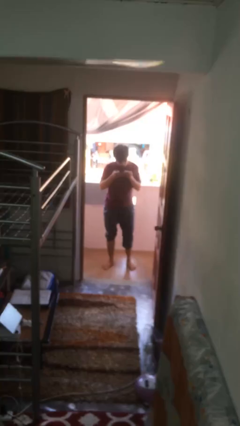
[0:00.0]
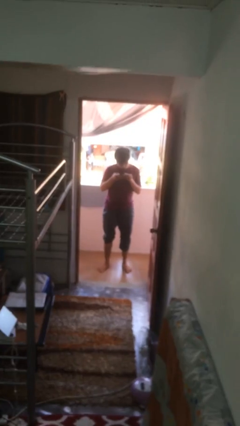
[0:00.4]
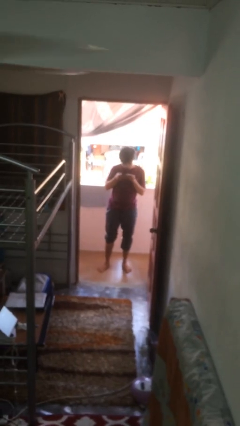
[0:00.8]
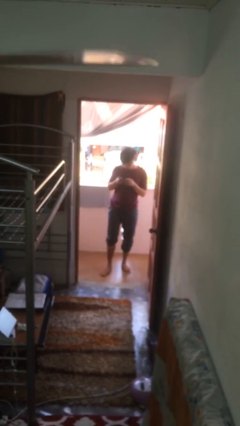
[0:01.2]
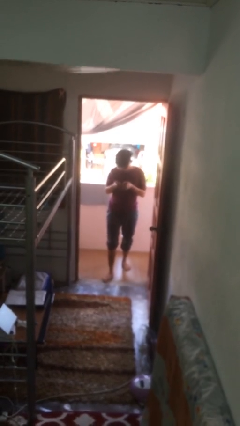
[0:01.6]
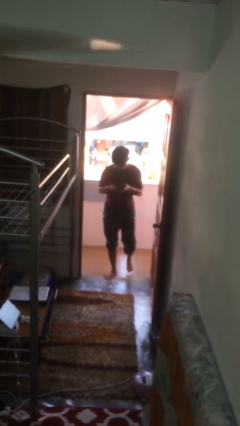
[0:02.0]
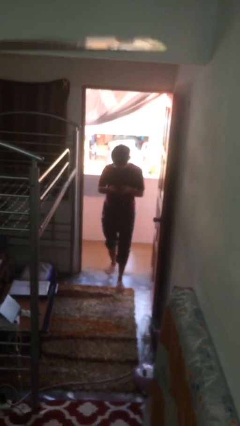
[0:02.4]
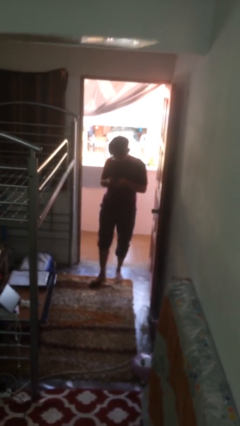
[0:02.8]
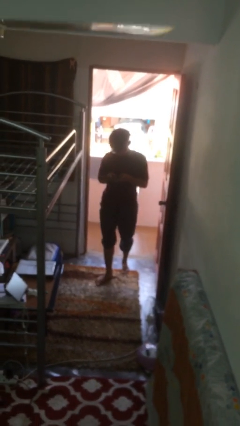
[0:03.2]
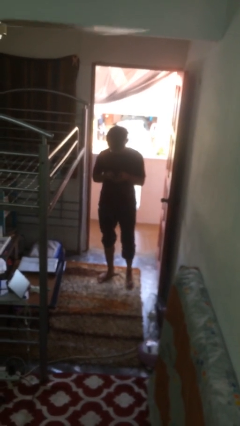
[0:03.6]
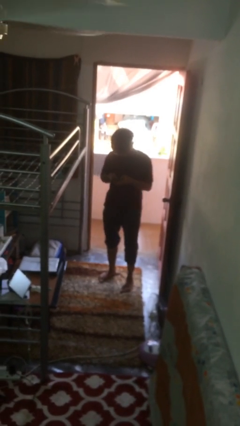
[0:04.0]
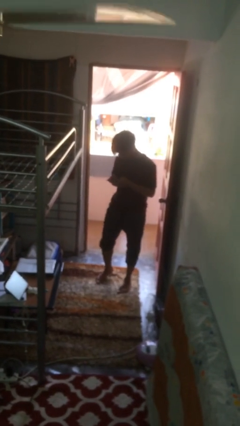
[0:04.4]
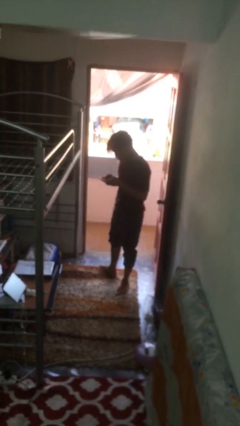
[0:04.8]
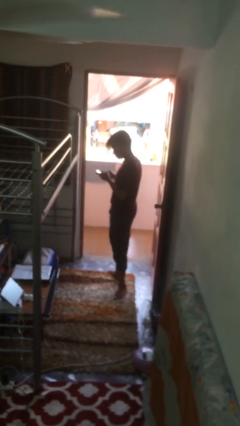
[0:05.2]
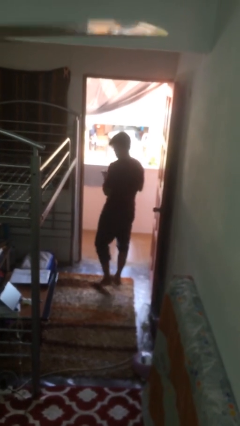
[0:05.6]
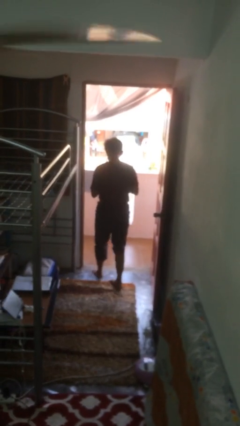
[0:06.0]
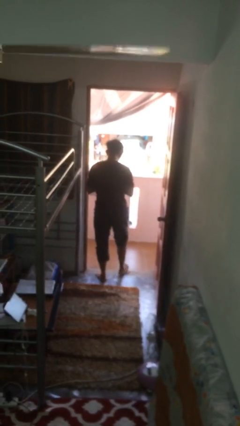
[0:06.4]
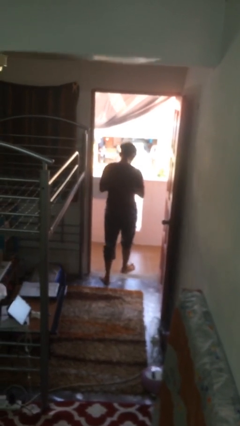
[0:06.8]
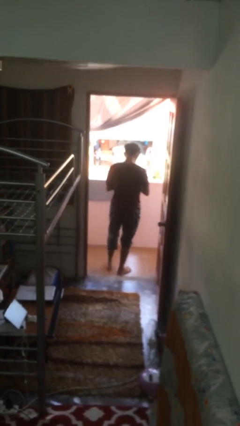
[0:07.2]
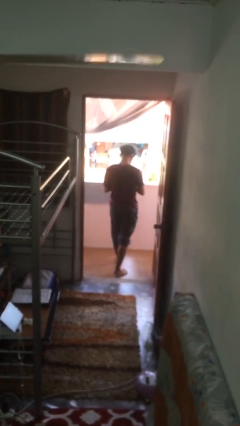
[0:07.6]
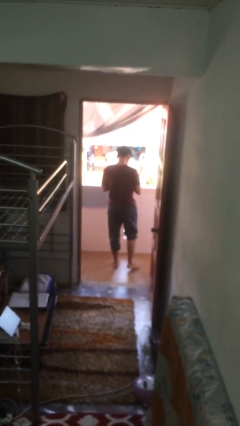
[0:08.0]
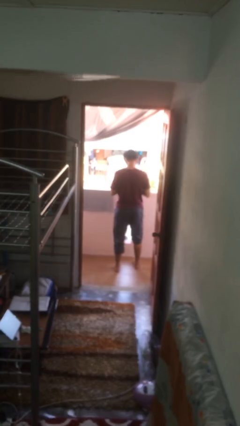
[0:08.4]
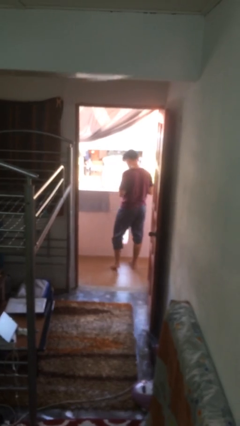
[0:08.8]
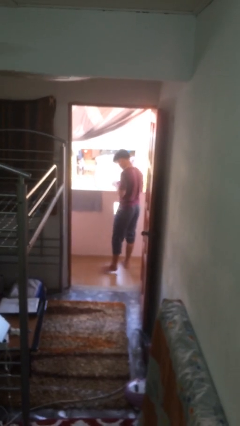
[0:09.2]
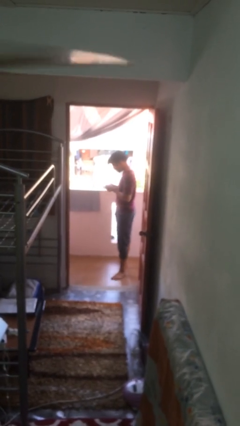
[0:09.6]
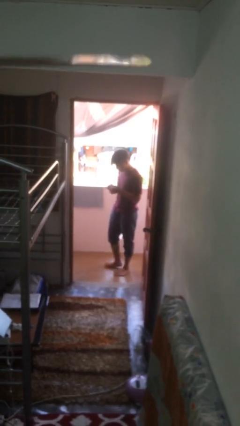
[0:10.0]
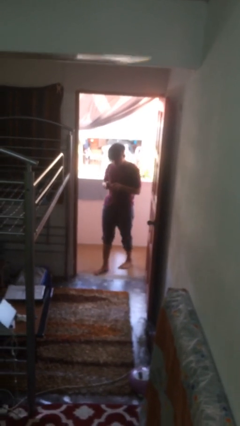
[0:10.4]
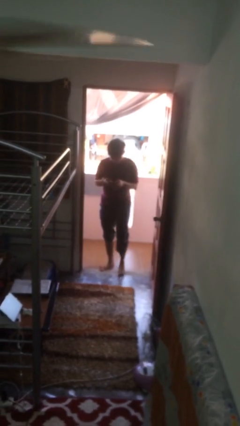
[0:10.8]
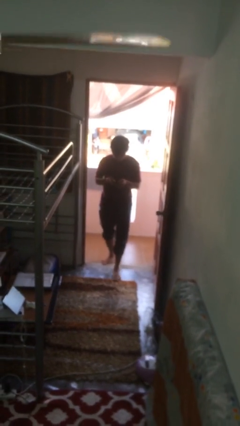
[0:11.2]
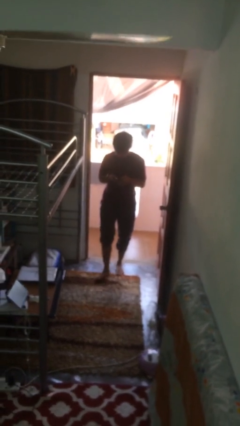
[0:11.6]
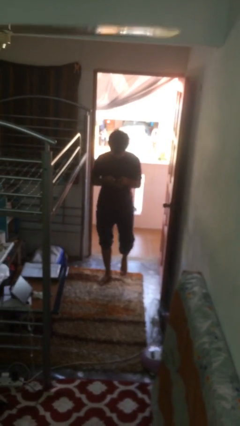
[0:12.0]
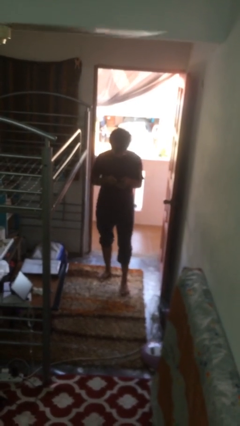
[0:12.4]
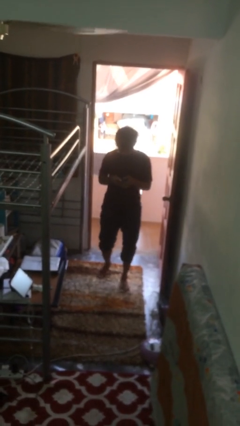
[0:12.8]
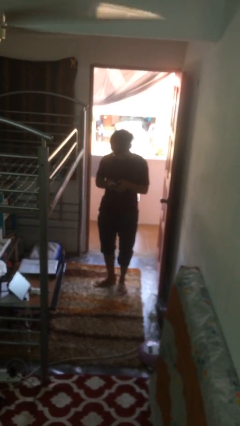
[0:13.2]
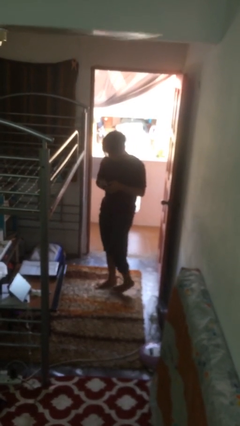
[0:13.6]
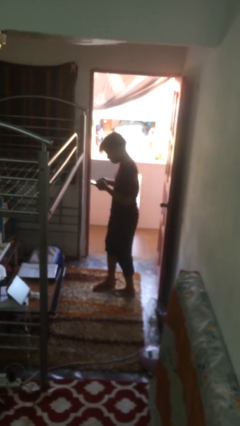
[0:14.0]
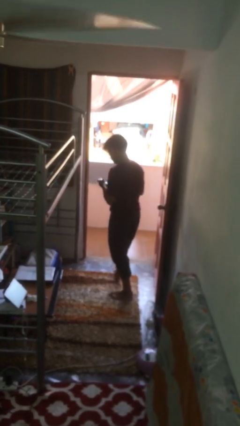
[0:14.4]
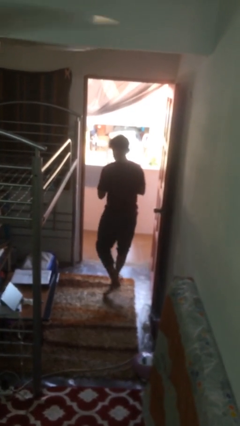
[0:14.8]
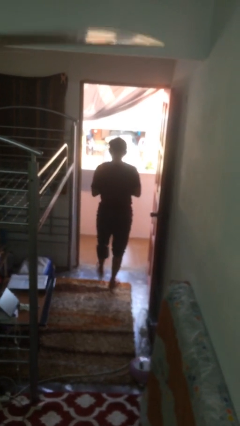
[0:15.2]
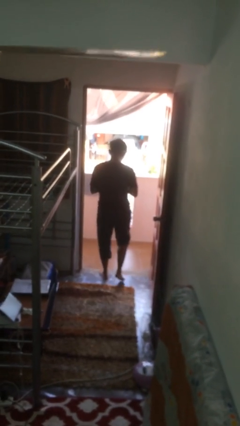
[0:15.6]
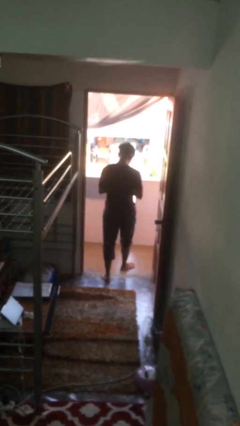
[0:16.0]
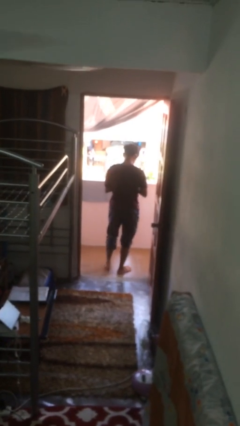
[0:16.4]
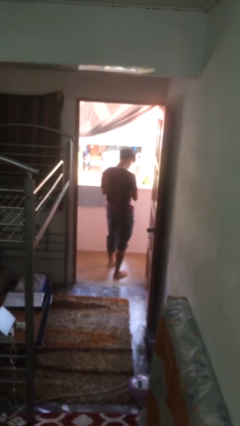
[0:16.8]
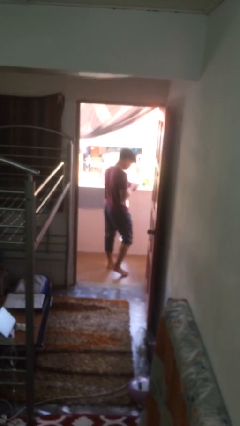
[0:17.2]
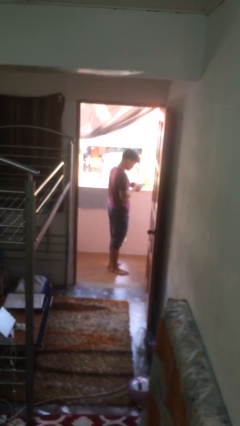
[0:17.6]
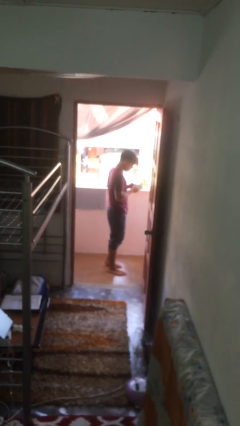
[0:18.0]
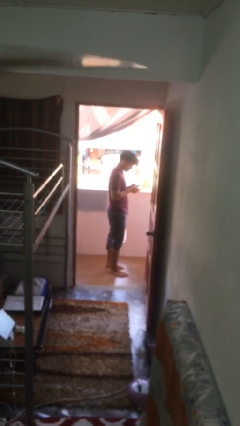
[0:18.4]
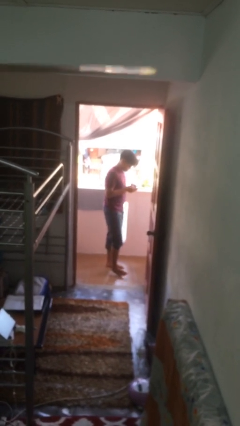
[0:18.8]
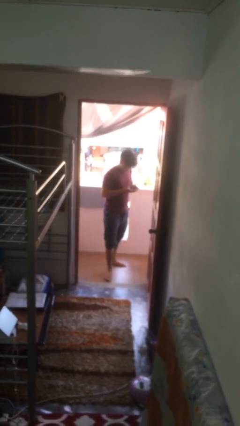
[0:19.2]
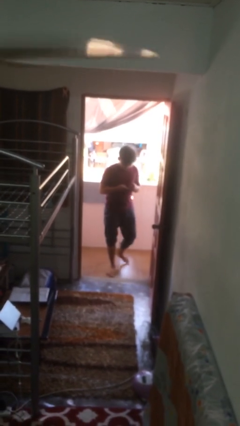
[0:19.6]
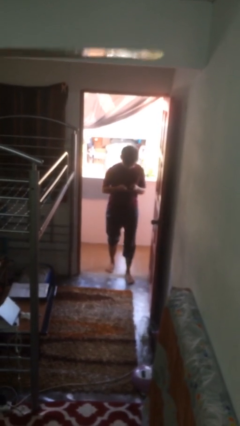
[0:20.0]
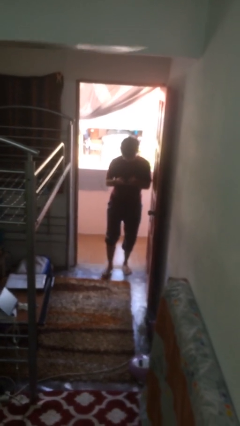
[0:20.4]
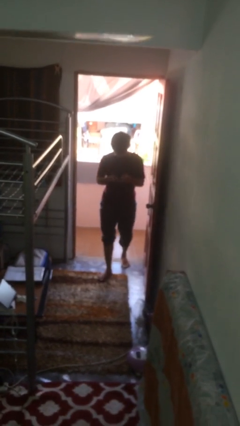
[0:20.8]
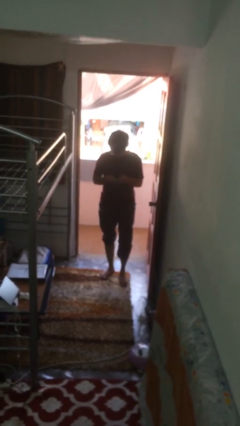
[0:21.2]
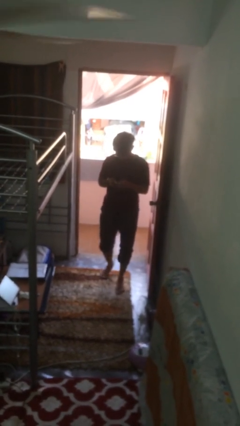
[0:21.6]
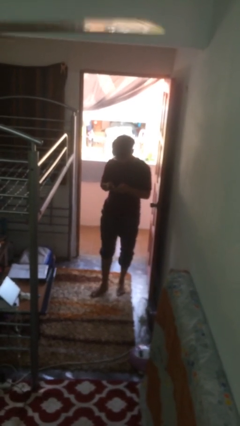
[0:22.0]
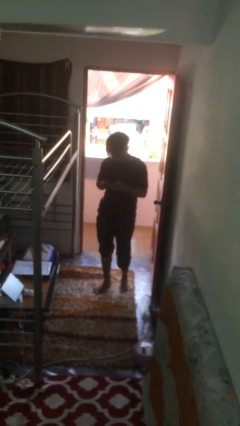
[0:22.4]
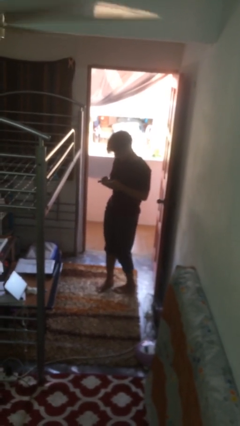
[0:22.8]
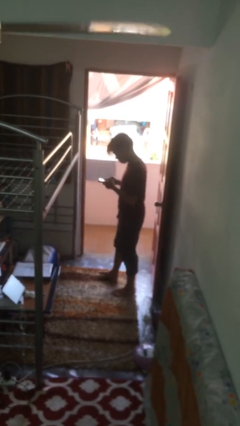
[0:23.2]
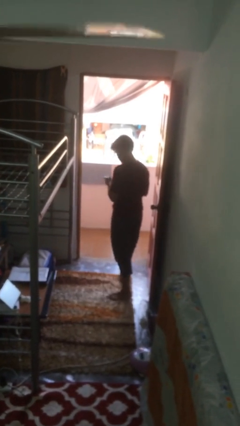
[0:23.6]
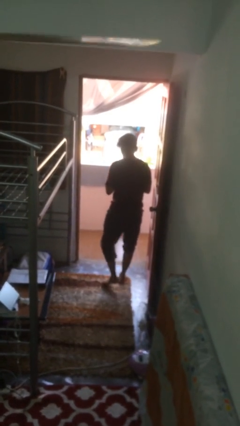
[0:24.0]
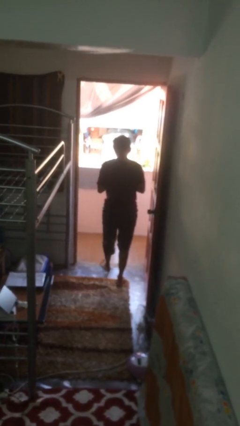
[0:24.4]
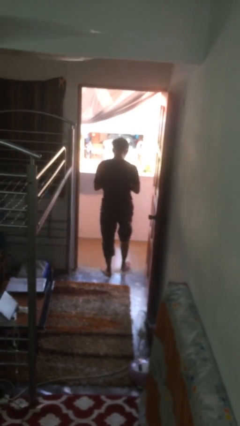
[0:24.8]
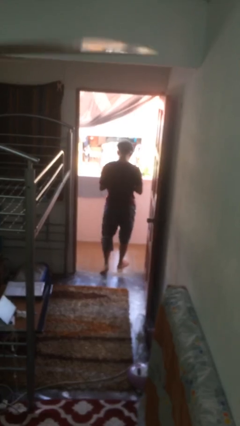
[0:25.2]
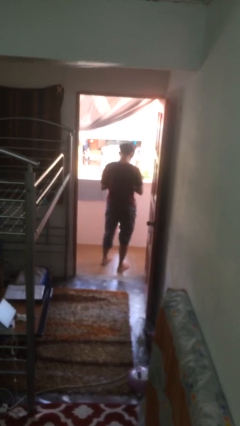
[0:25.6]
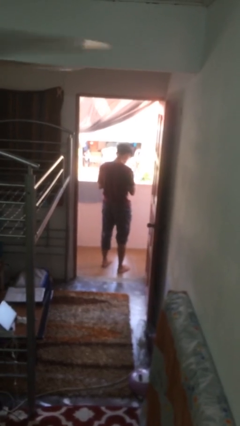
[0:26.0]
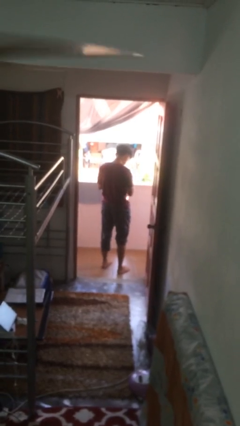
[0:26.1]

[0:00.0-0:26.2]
person texts on phone

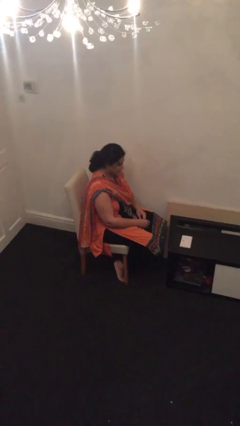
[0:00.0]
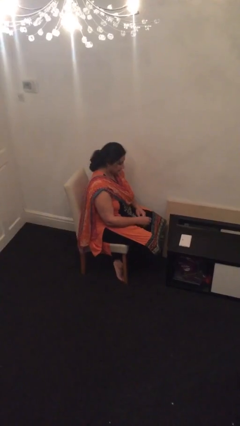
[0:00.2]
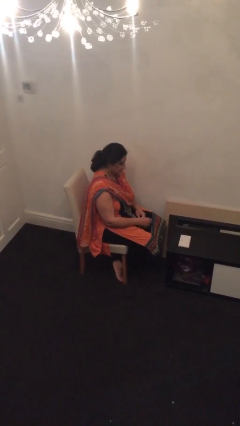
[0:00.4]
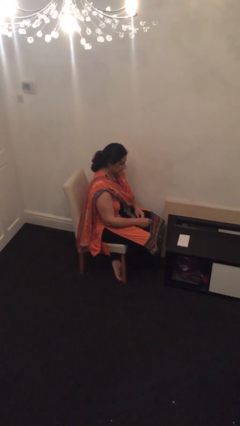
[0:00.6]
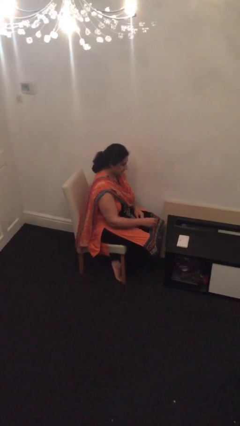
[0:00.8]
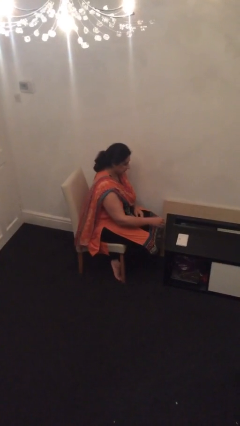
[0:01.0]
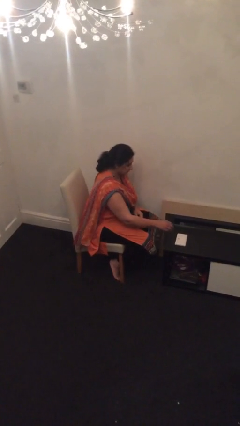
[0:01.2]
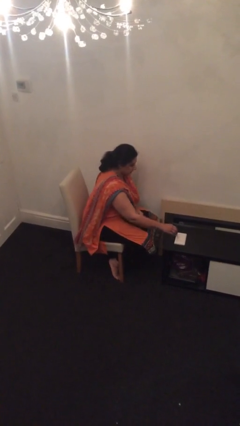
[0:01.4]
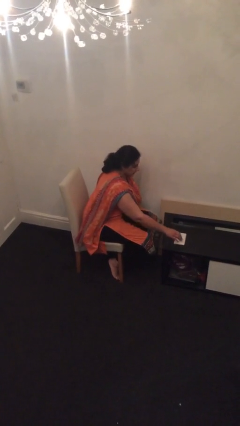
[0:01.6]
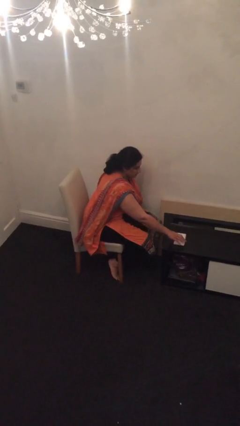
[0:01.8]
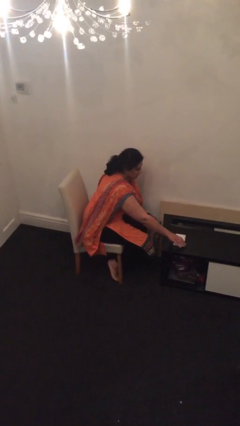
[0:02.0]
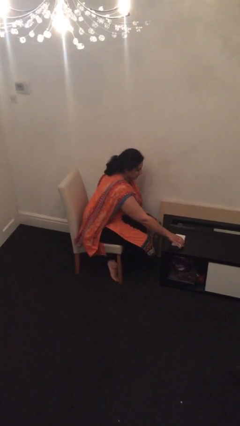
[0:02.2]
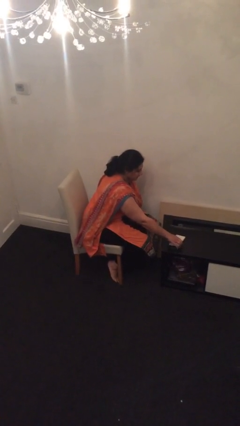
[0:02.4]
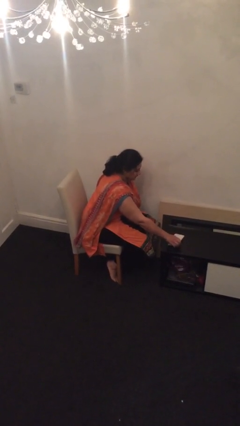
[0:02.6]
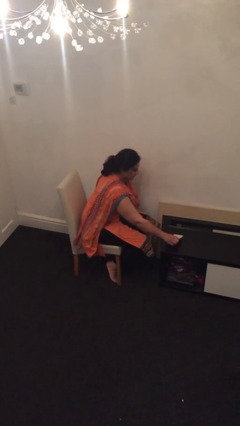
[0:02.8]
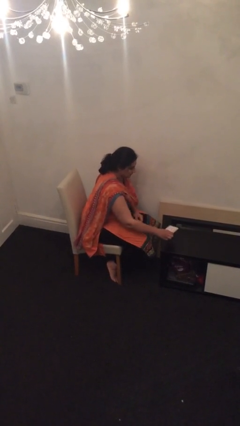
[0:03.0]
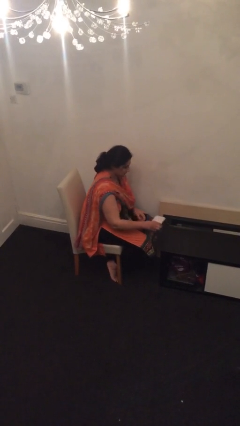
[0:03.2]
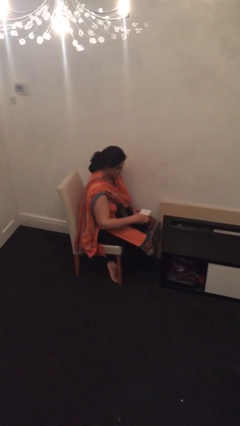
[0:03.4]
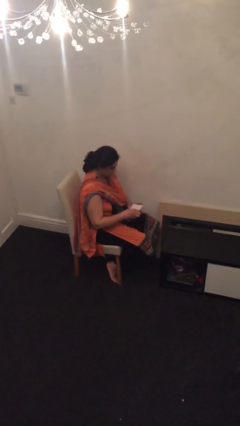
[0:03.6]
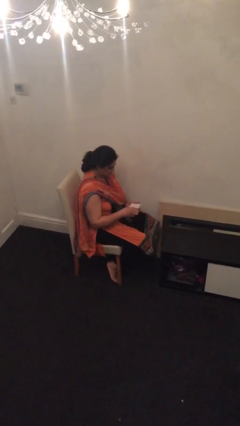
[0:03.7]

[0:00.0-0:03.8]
person picks up object from table

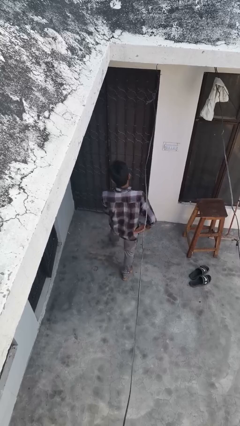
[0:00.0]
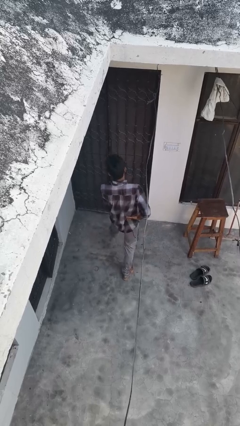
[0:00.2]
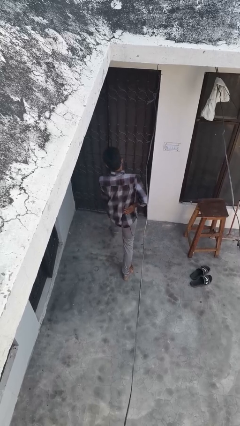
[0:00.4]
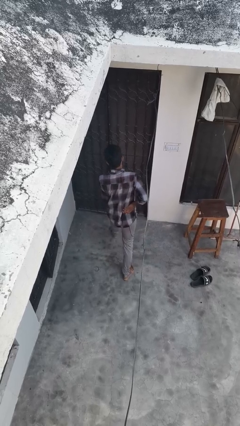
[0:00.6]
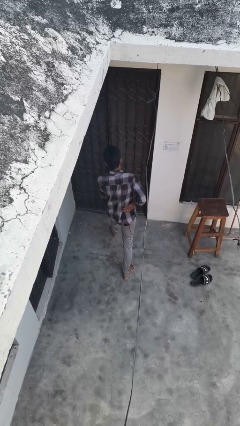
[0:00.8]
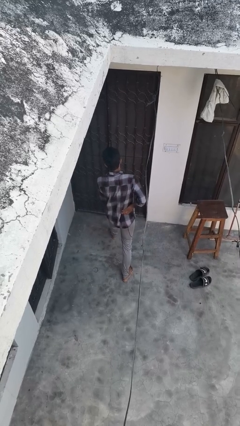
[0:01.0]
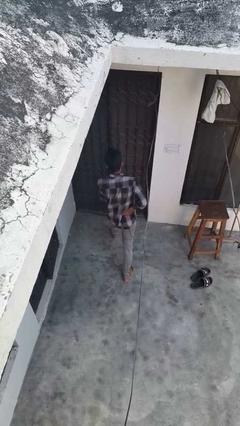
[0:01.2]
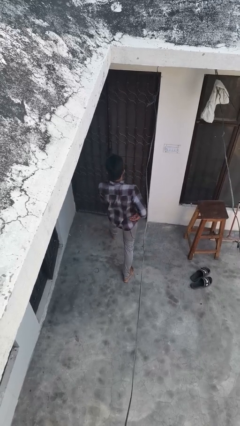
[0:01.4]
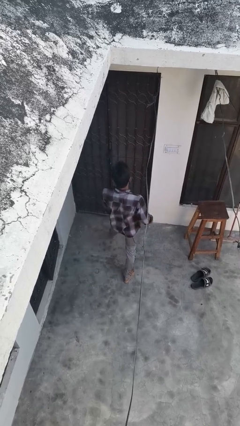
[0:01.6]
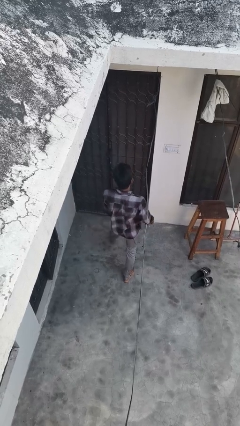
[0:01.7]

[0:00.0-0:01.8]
person exercises with lunges
